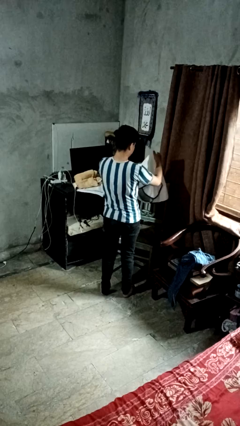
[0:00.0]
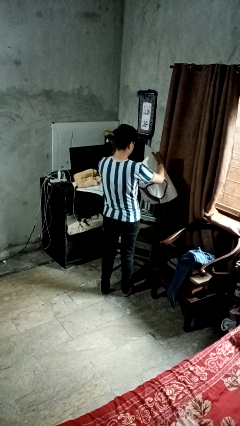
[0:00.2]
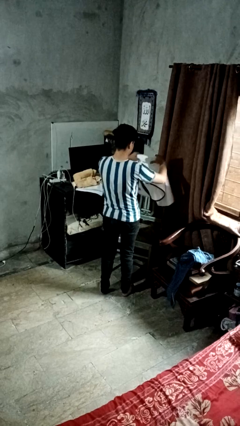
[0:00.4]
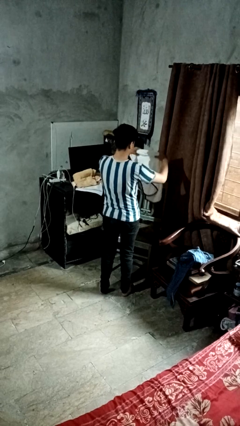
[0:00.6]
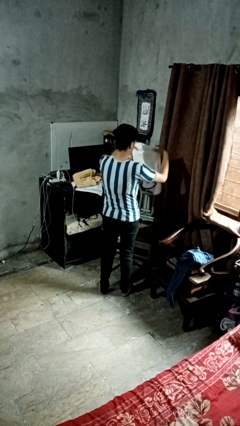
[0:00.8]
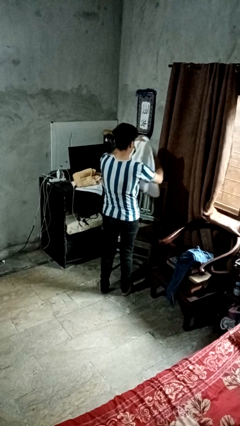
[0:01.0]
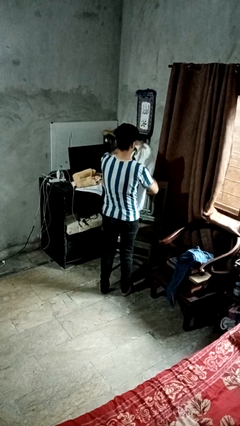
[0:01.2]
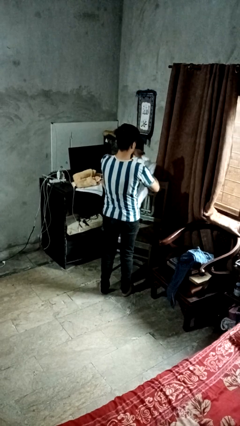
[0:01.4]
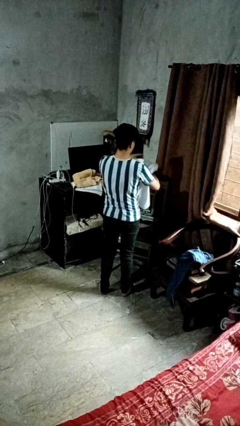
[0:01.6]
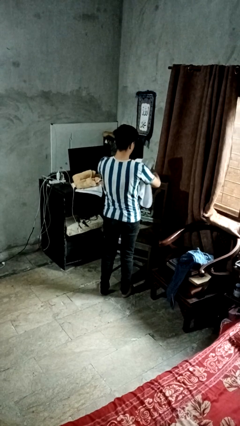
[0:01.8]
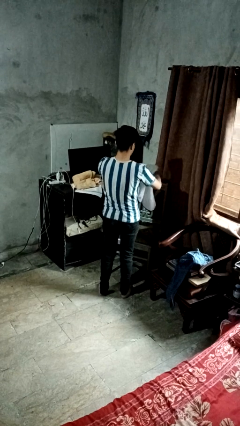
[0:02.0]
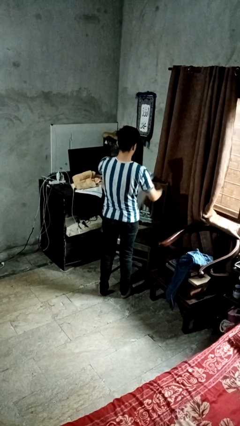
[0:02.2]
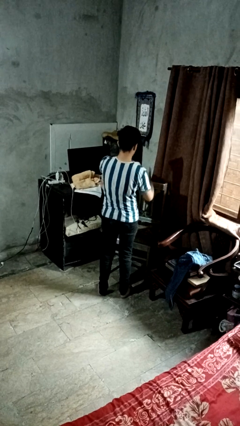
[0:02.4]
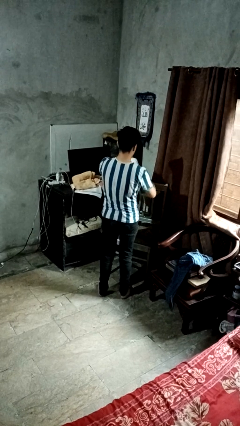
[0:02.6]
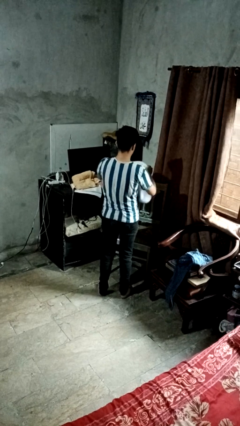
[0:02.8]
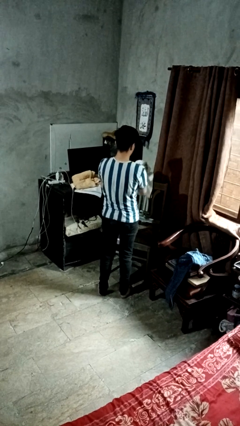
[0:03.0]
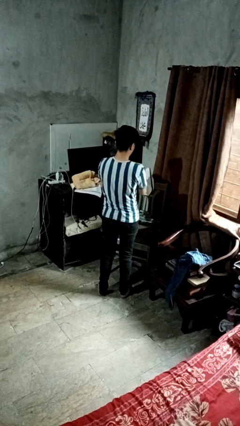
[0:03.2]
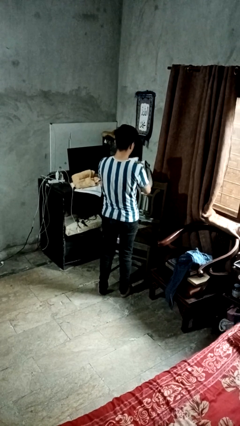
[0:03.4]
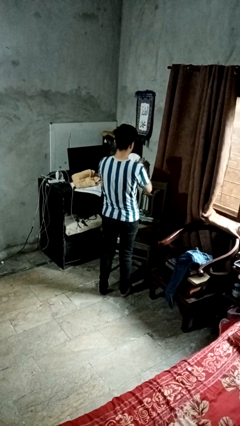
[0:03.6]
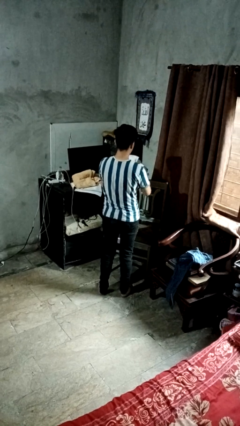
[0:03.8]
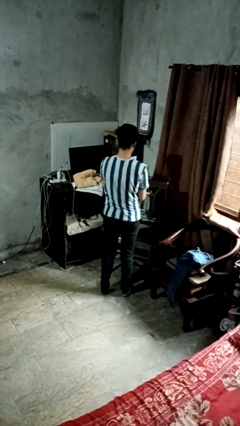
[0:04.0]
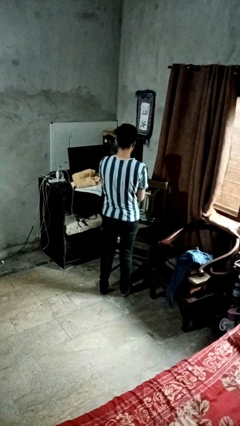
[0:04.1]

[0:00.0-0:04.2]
person folds towel

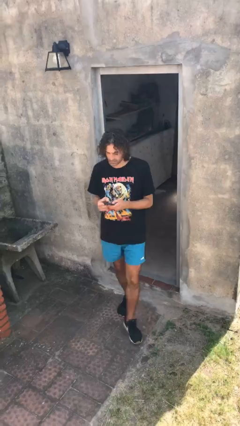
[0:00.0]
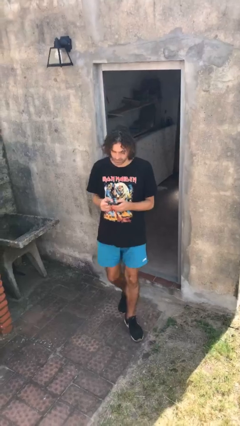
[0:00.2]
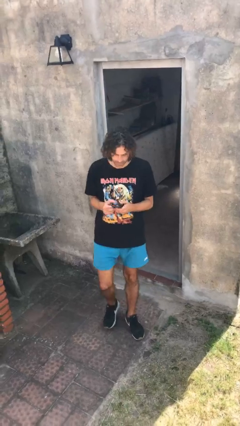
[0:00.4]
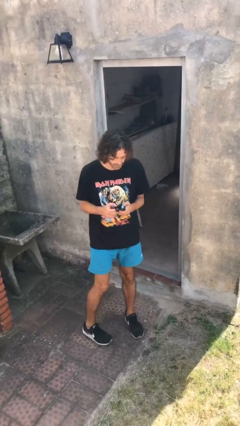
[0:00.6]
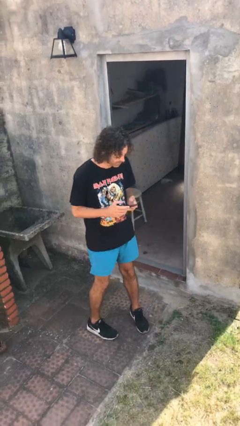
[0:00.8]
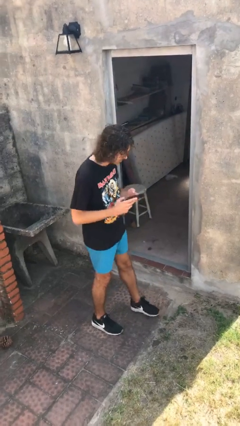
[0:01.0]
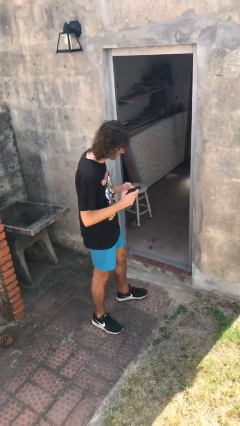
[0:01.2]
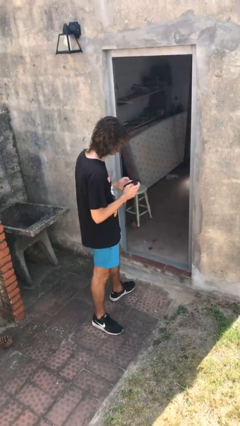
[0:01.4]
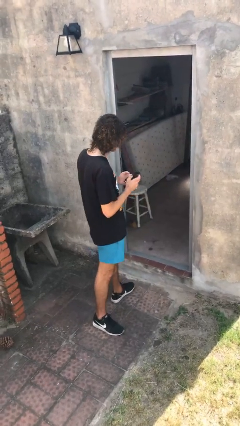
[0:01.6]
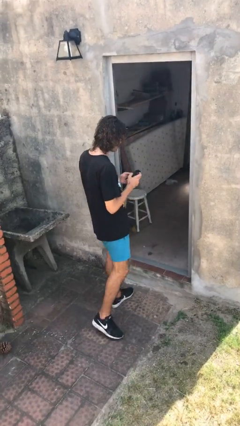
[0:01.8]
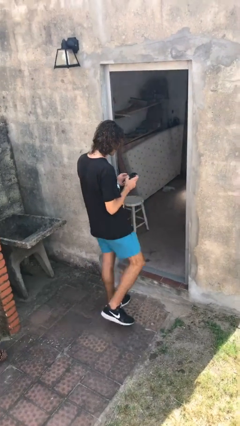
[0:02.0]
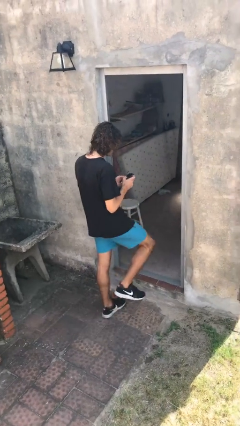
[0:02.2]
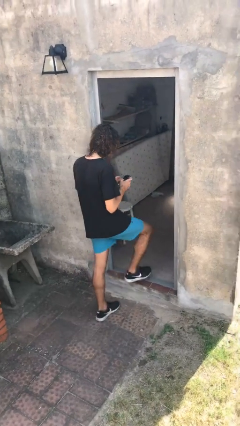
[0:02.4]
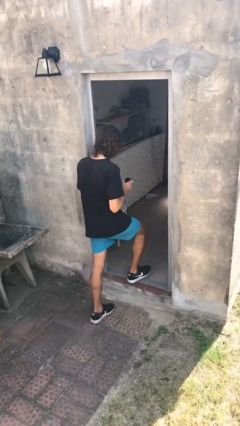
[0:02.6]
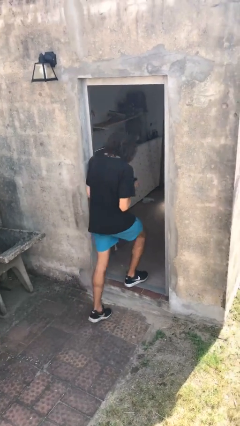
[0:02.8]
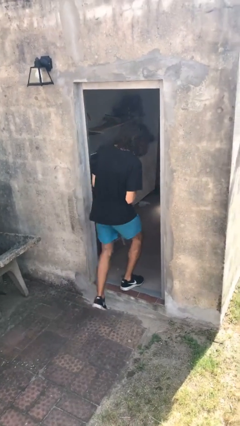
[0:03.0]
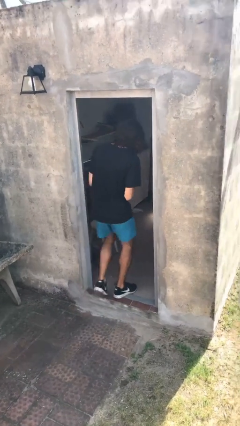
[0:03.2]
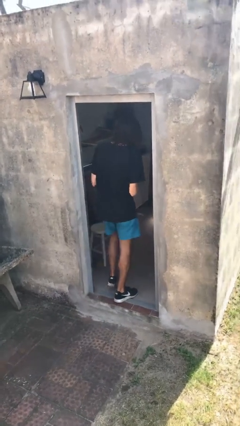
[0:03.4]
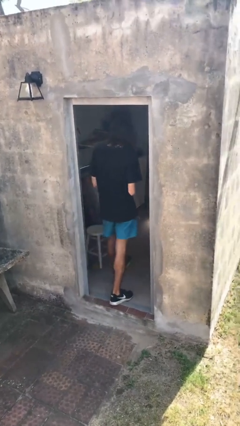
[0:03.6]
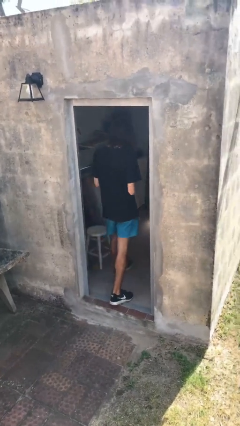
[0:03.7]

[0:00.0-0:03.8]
person exits scene through structure

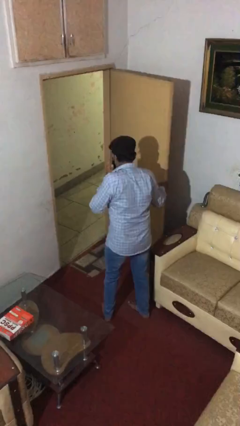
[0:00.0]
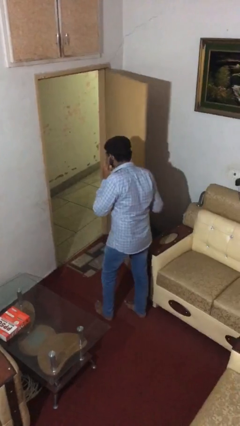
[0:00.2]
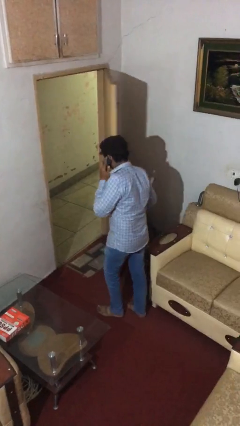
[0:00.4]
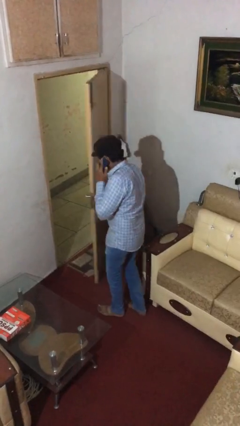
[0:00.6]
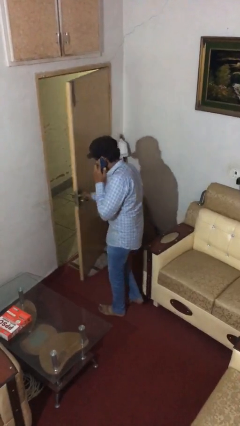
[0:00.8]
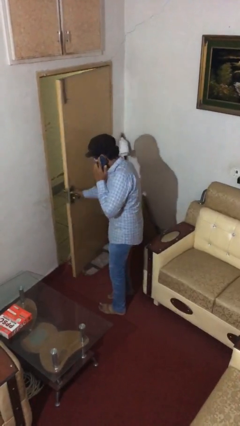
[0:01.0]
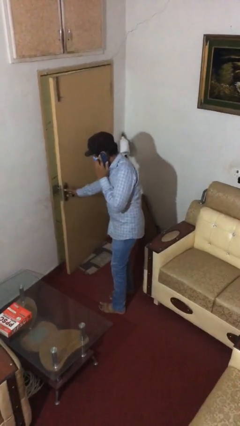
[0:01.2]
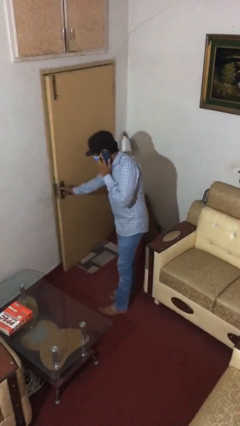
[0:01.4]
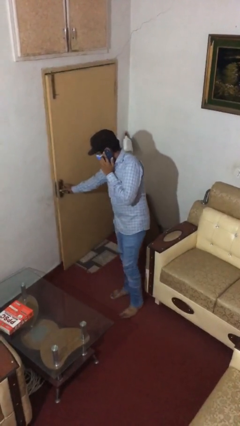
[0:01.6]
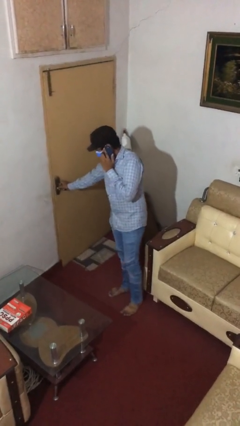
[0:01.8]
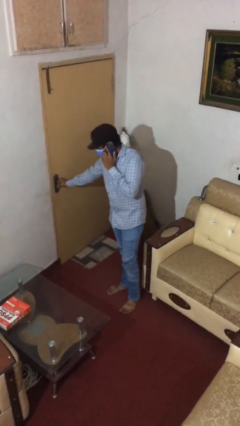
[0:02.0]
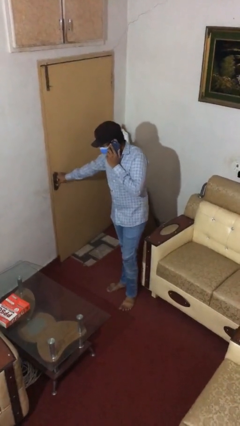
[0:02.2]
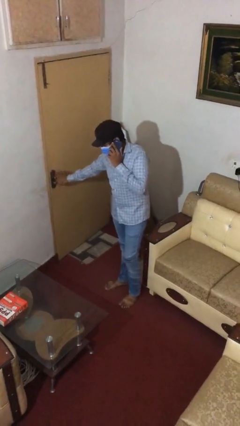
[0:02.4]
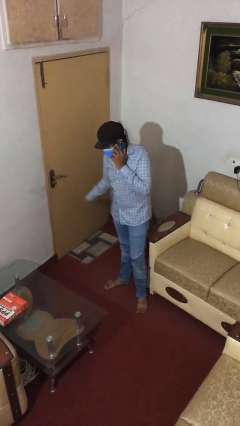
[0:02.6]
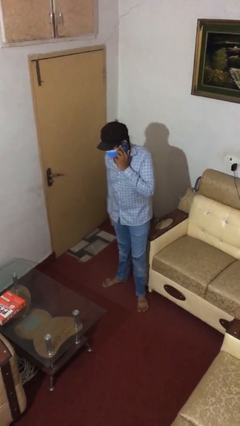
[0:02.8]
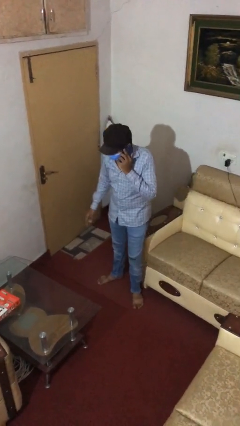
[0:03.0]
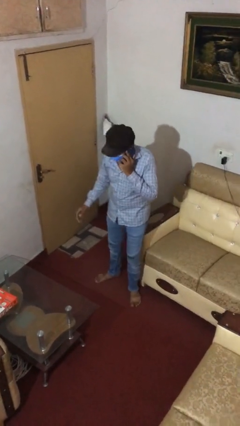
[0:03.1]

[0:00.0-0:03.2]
person closes facility door

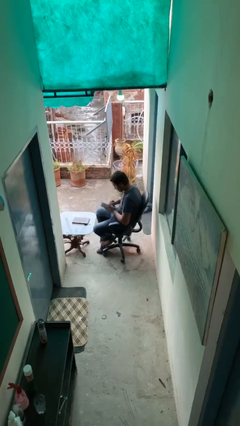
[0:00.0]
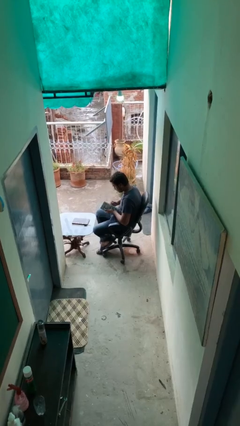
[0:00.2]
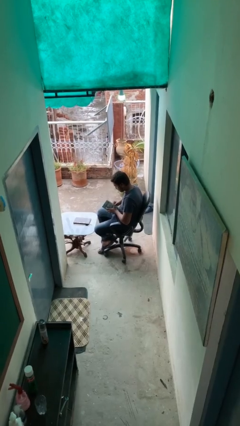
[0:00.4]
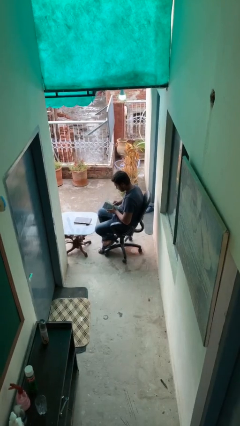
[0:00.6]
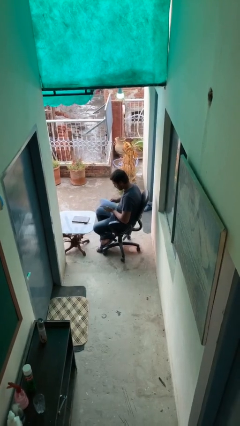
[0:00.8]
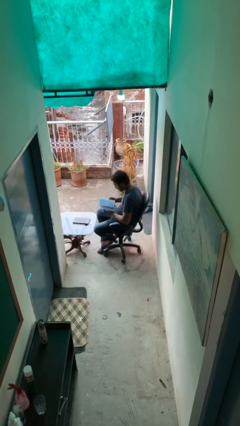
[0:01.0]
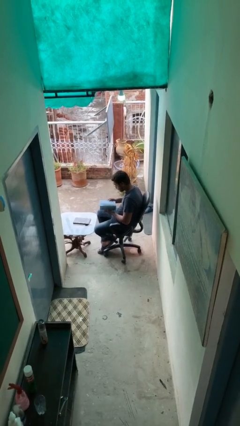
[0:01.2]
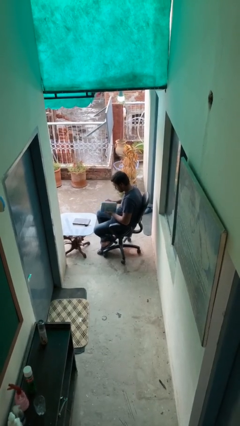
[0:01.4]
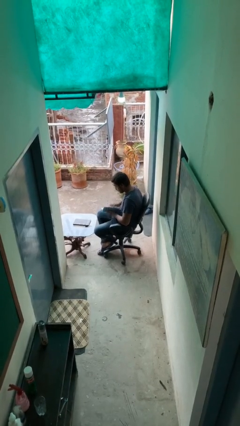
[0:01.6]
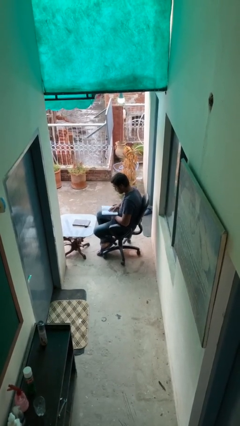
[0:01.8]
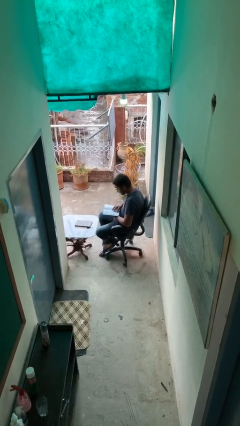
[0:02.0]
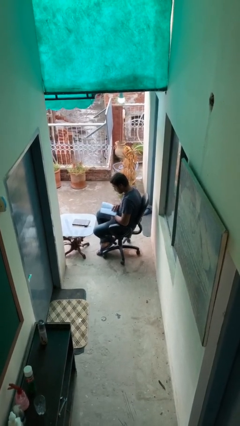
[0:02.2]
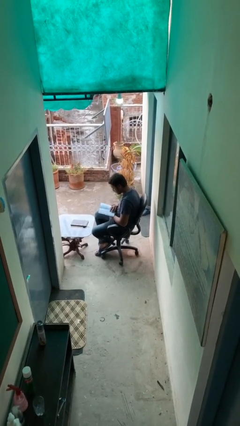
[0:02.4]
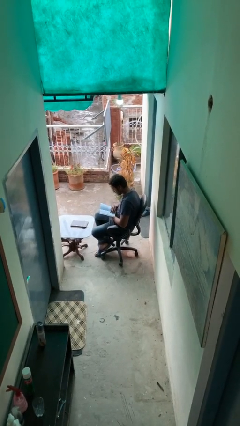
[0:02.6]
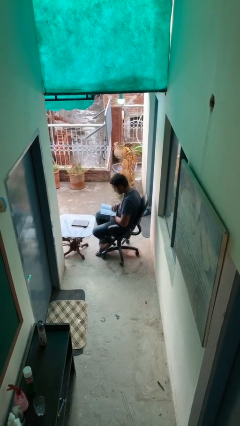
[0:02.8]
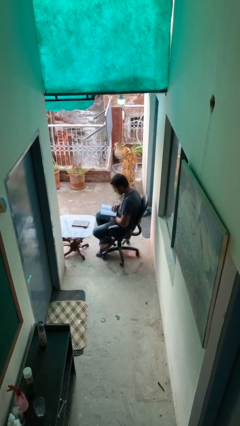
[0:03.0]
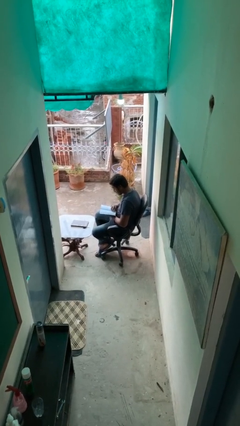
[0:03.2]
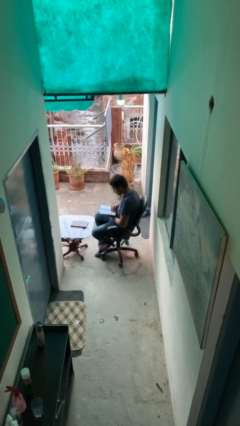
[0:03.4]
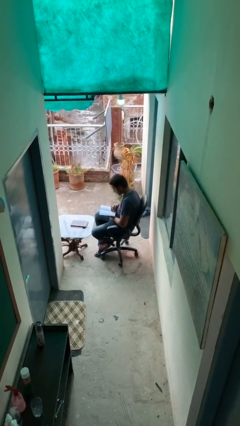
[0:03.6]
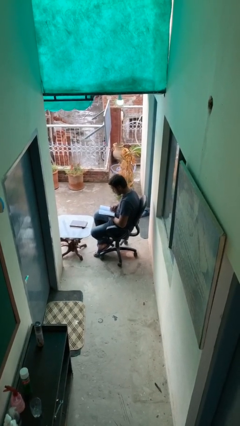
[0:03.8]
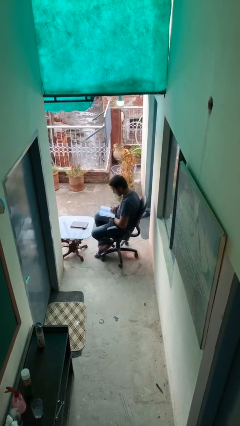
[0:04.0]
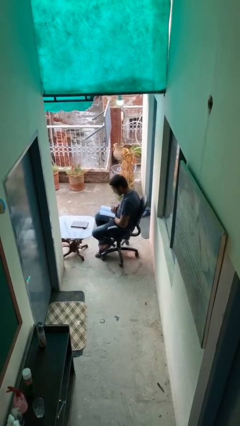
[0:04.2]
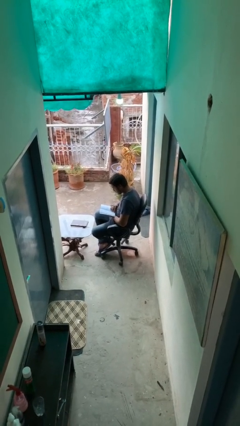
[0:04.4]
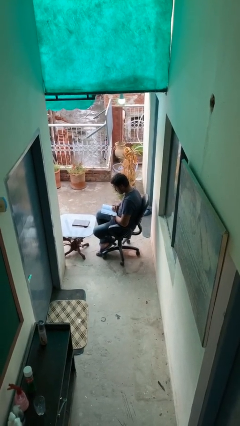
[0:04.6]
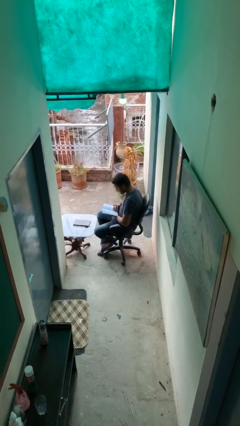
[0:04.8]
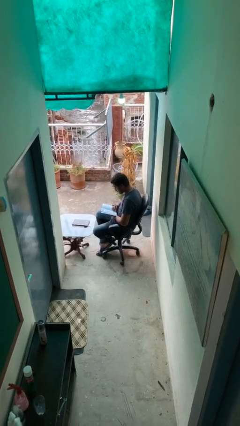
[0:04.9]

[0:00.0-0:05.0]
person reads document

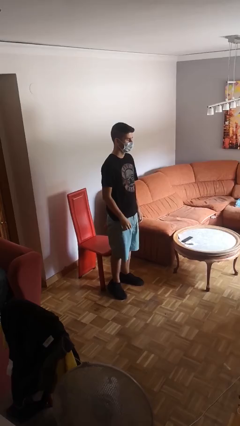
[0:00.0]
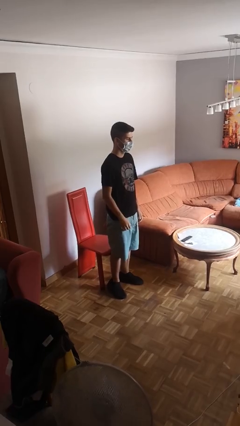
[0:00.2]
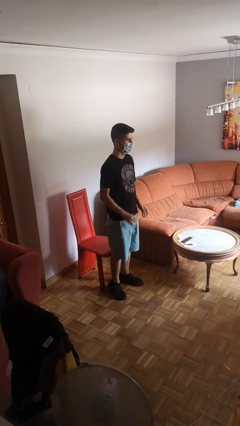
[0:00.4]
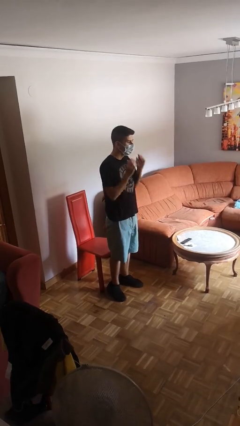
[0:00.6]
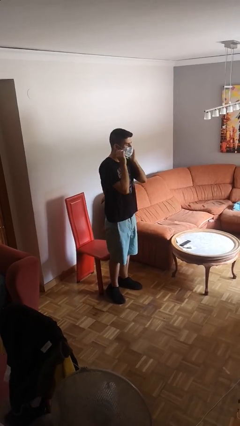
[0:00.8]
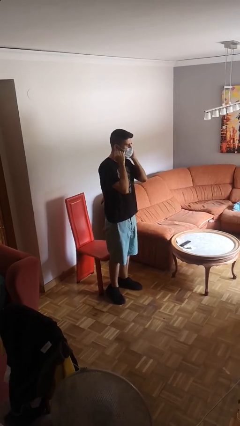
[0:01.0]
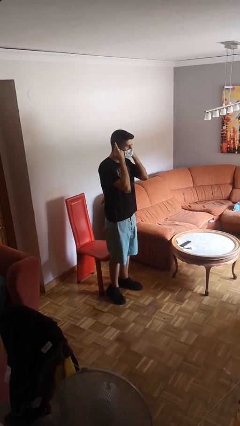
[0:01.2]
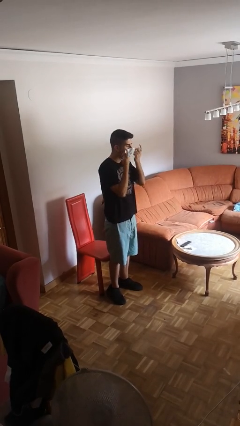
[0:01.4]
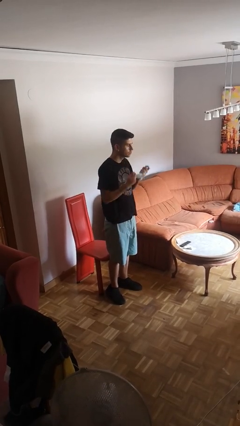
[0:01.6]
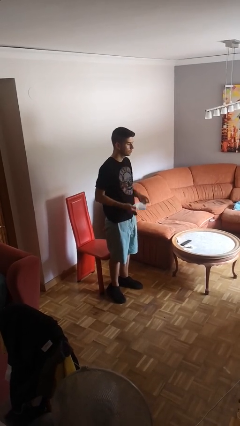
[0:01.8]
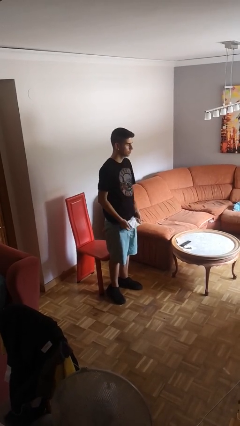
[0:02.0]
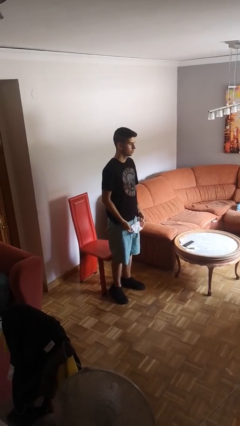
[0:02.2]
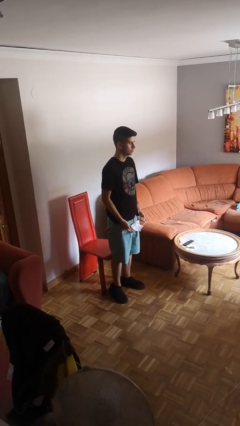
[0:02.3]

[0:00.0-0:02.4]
person takes off facemask
